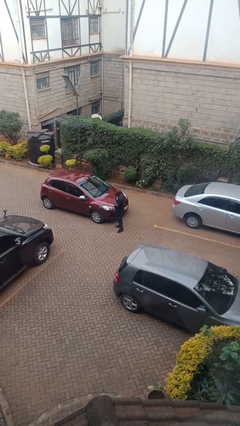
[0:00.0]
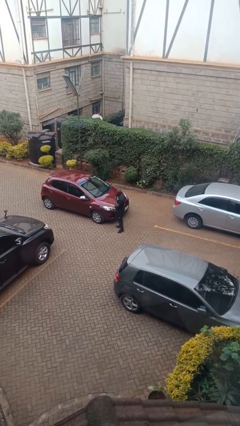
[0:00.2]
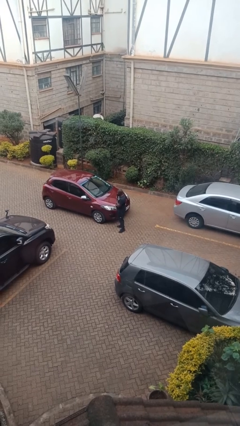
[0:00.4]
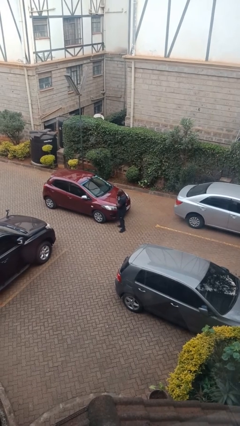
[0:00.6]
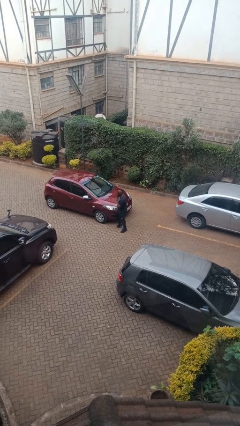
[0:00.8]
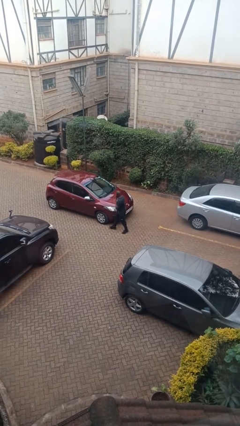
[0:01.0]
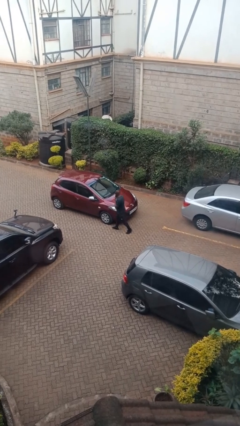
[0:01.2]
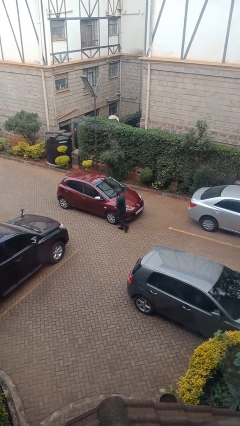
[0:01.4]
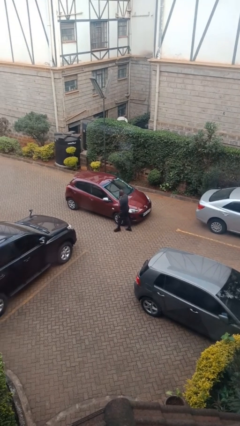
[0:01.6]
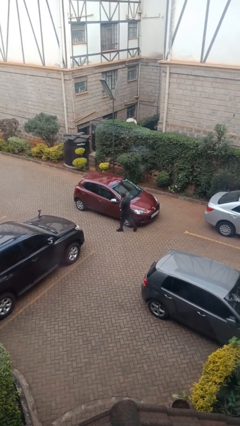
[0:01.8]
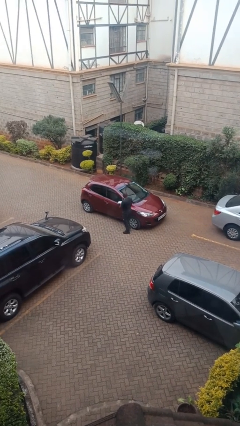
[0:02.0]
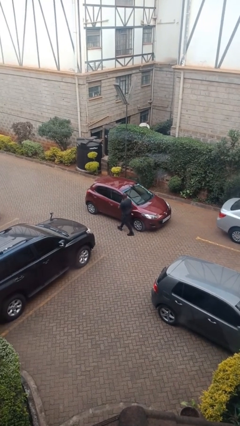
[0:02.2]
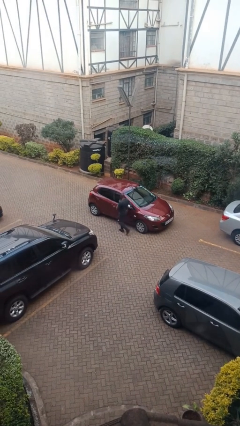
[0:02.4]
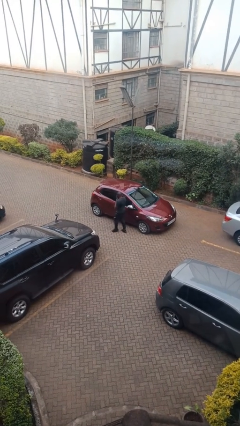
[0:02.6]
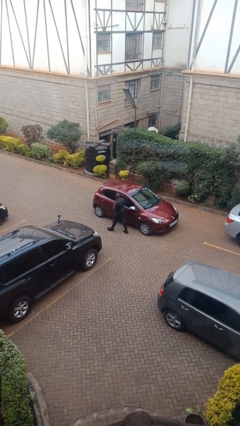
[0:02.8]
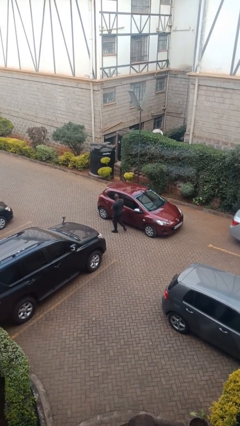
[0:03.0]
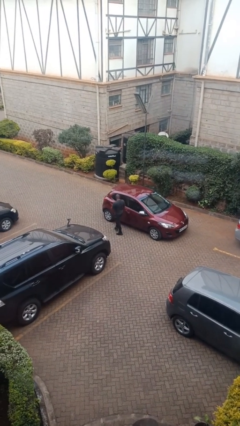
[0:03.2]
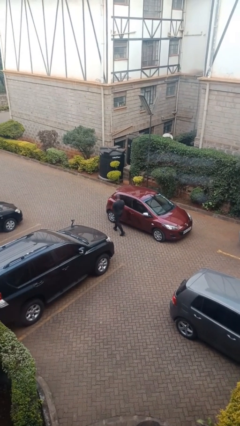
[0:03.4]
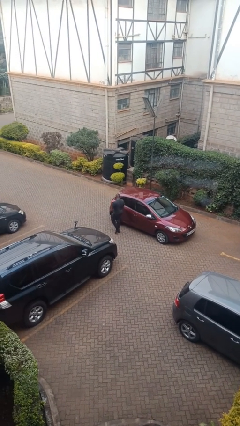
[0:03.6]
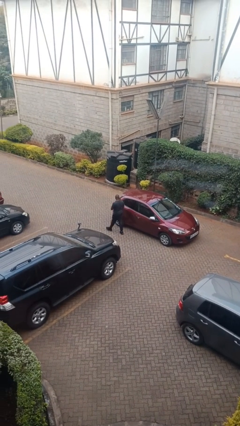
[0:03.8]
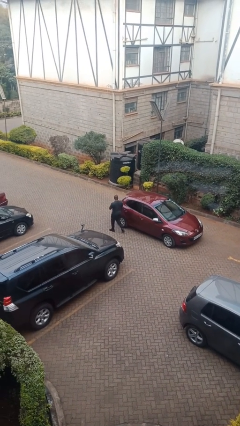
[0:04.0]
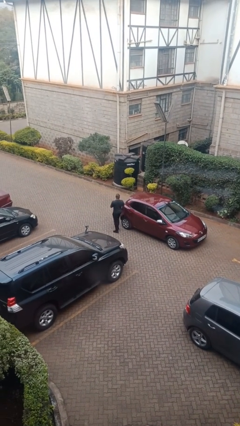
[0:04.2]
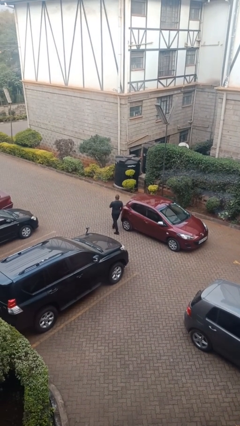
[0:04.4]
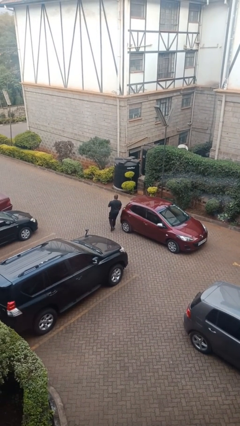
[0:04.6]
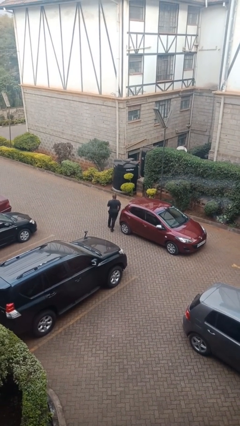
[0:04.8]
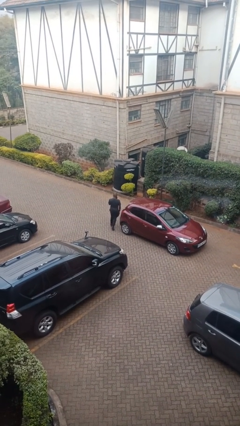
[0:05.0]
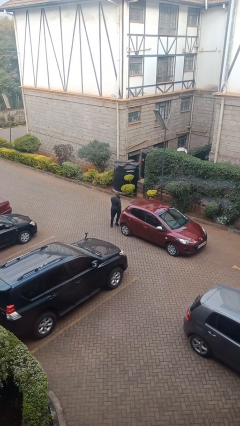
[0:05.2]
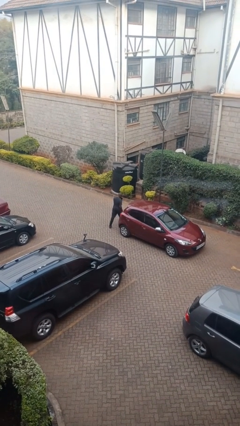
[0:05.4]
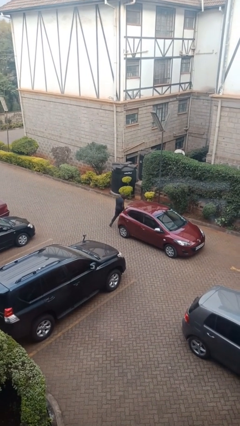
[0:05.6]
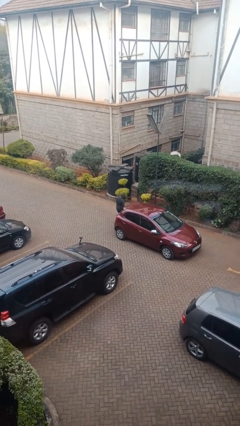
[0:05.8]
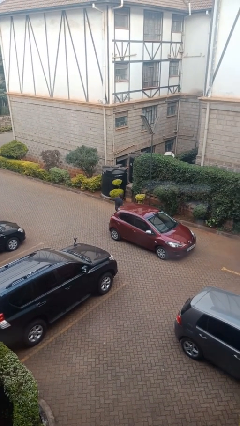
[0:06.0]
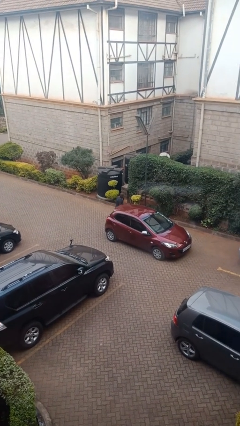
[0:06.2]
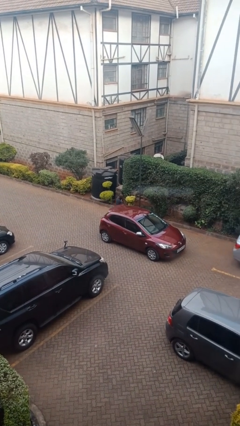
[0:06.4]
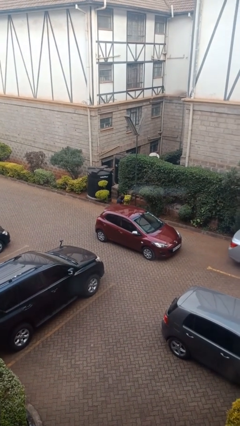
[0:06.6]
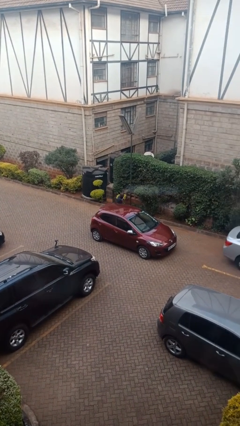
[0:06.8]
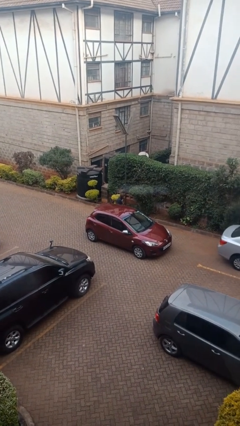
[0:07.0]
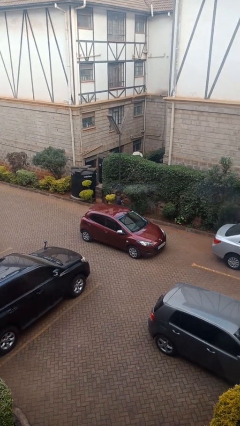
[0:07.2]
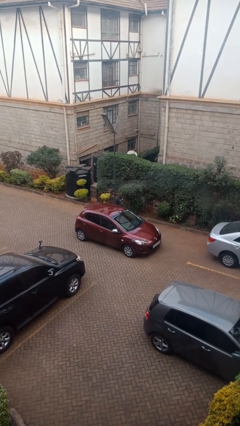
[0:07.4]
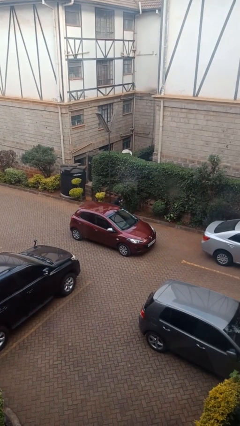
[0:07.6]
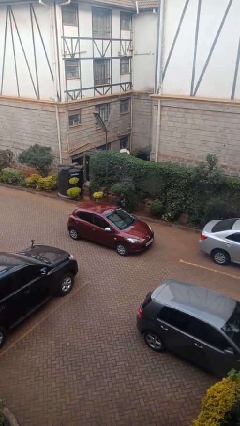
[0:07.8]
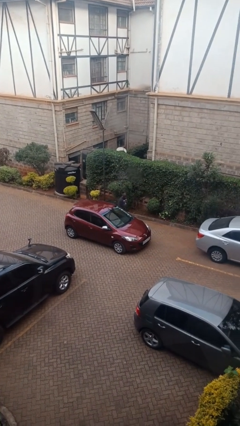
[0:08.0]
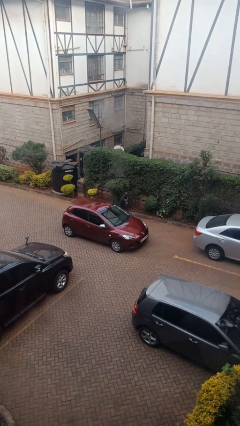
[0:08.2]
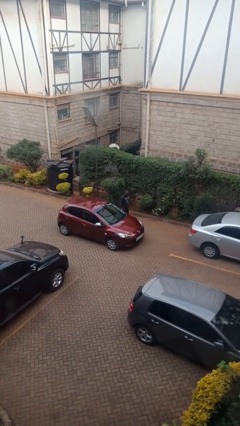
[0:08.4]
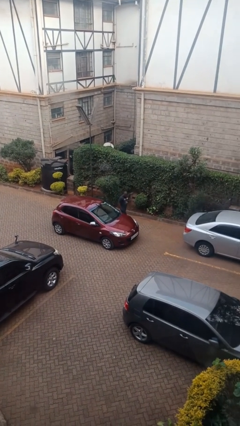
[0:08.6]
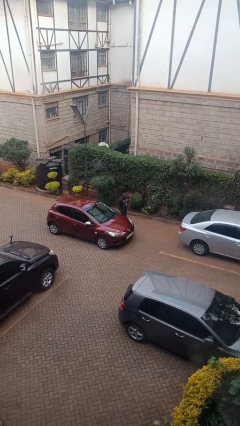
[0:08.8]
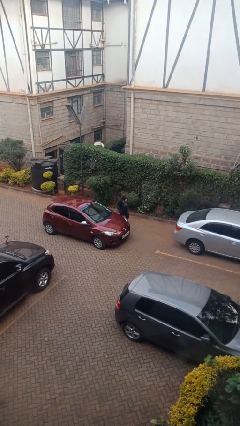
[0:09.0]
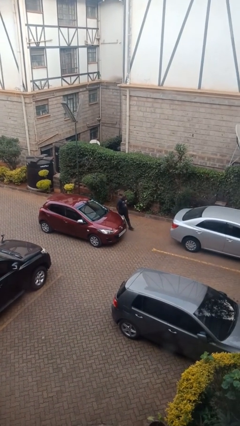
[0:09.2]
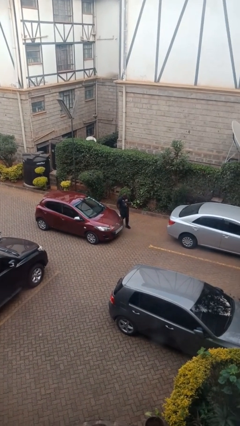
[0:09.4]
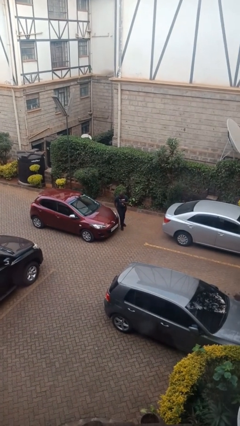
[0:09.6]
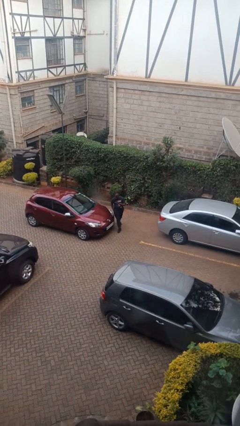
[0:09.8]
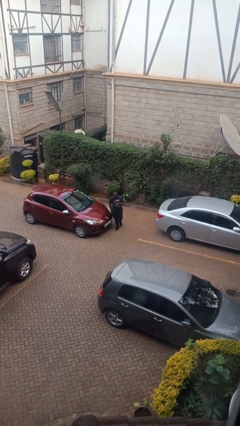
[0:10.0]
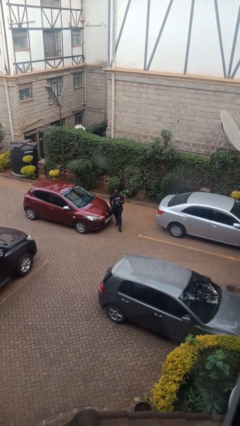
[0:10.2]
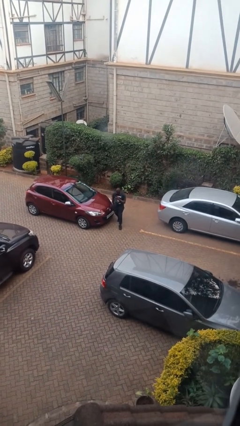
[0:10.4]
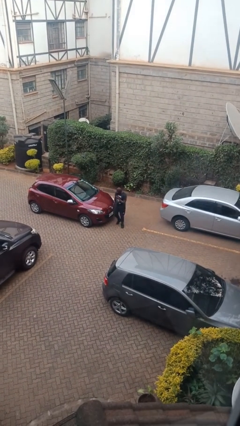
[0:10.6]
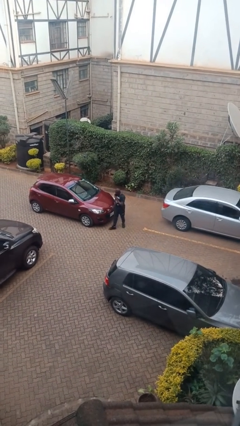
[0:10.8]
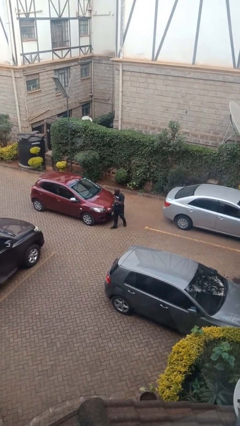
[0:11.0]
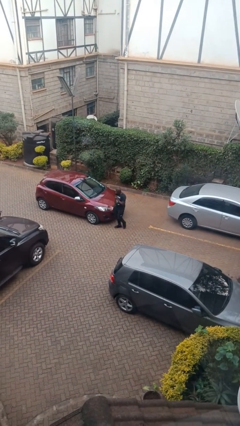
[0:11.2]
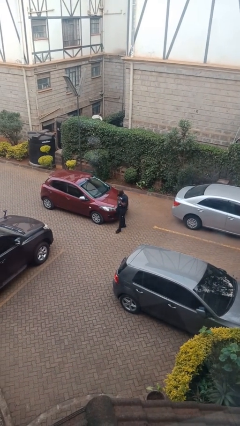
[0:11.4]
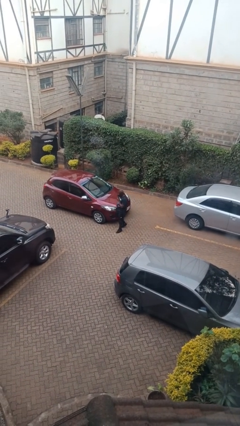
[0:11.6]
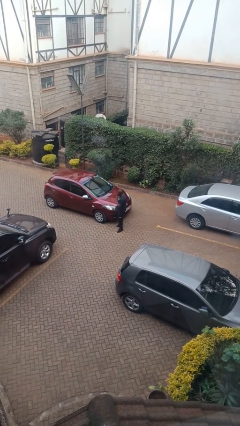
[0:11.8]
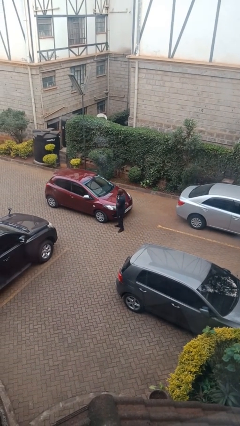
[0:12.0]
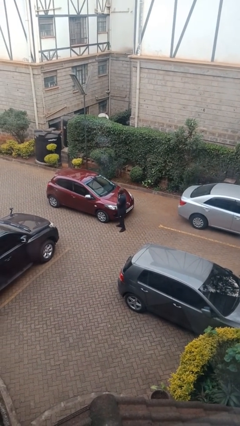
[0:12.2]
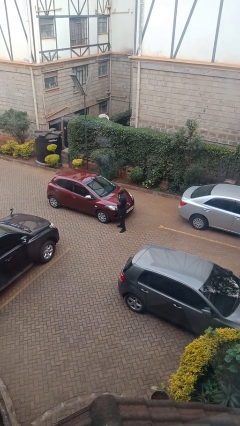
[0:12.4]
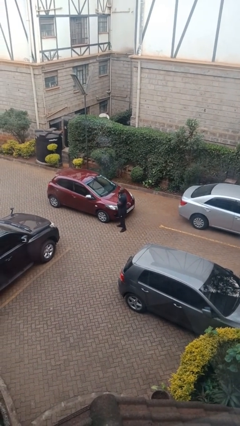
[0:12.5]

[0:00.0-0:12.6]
person walks around car

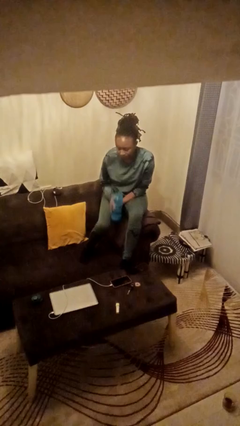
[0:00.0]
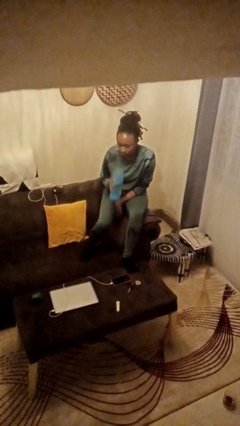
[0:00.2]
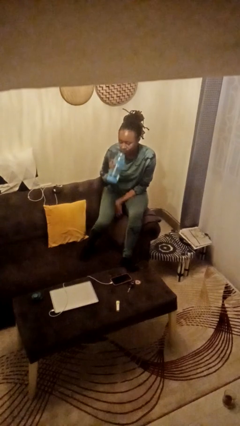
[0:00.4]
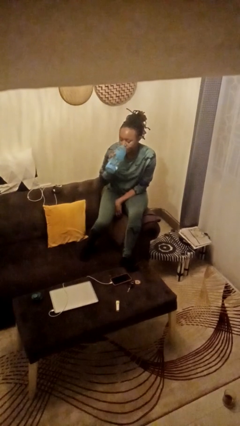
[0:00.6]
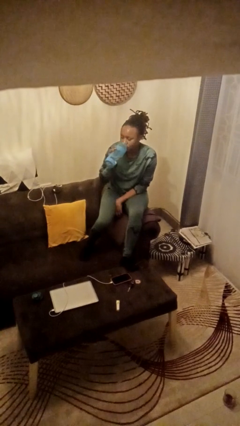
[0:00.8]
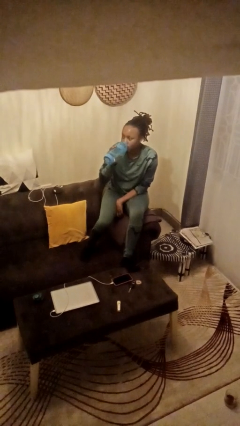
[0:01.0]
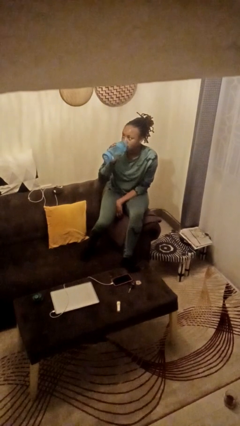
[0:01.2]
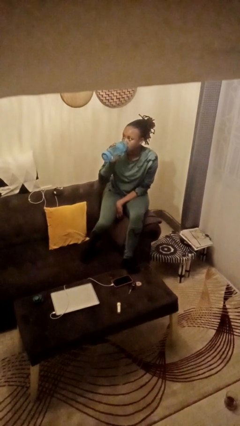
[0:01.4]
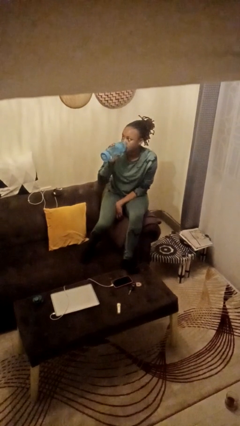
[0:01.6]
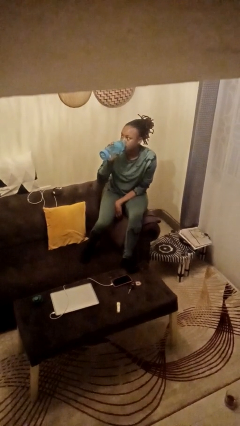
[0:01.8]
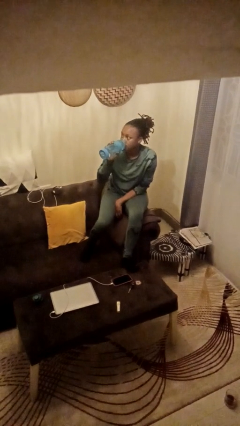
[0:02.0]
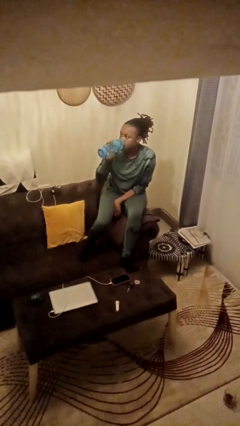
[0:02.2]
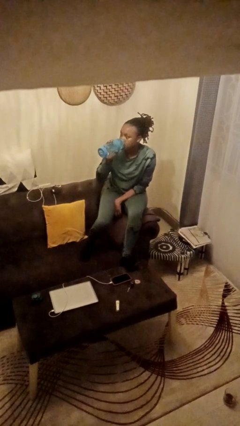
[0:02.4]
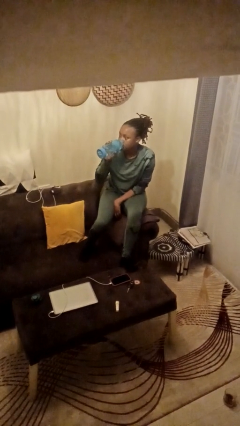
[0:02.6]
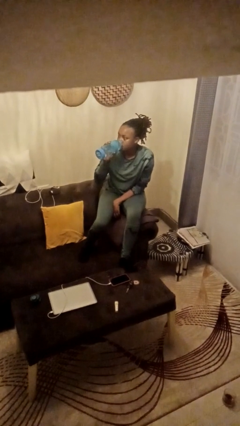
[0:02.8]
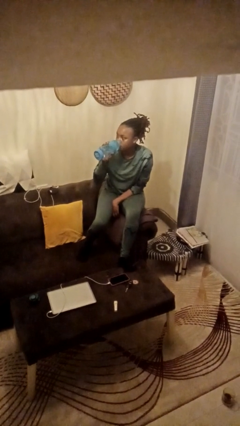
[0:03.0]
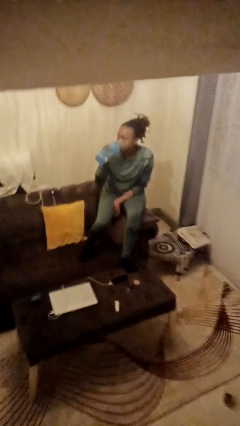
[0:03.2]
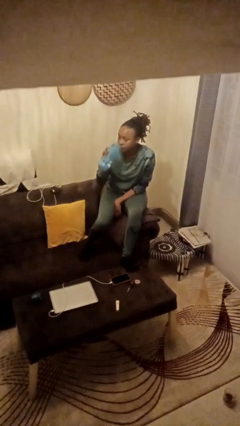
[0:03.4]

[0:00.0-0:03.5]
person drinks from bottle

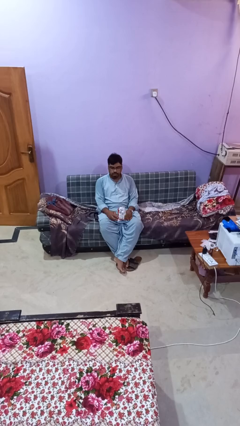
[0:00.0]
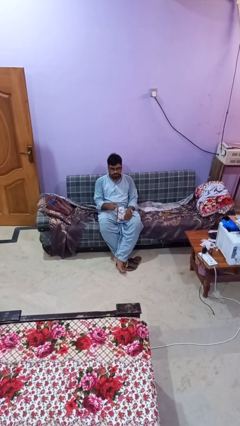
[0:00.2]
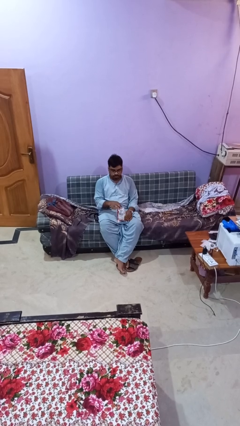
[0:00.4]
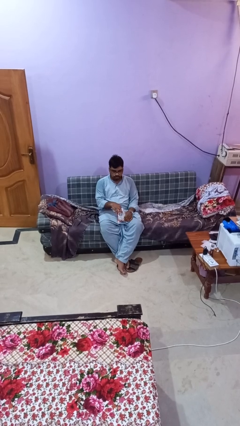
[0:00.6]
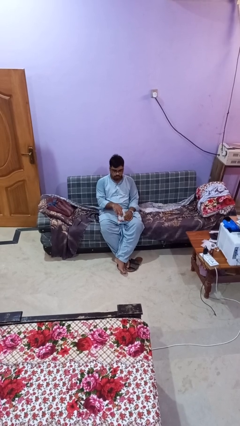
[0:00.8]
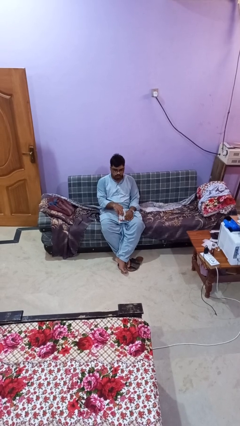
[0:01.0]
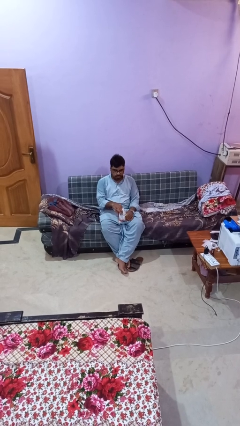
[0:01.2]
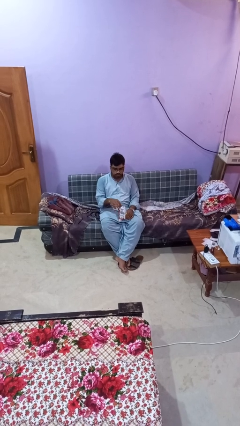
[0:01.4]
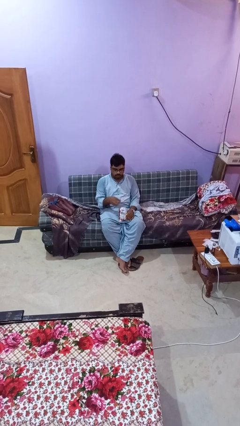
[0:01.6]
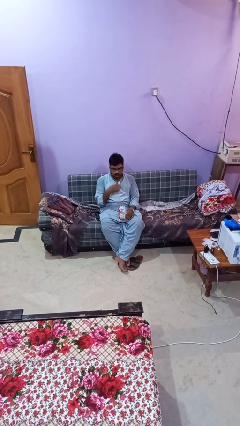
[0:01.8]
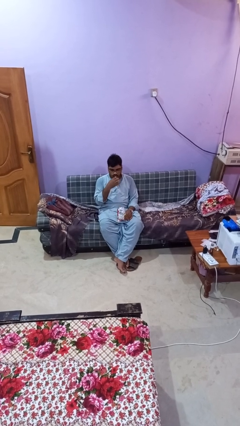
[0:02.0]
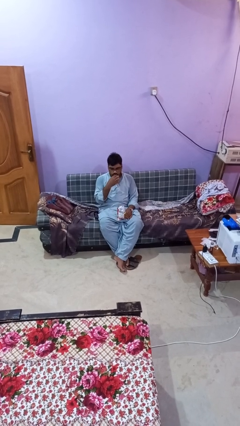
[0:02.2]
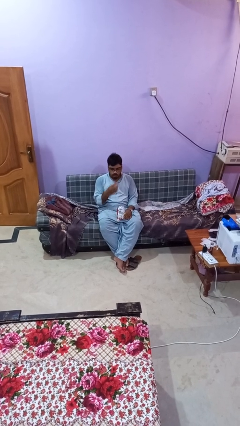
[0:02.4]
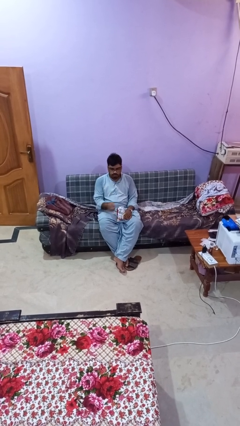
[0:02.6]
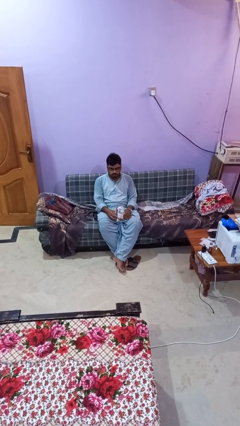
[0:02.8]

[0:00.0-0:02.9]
person eats snack from bag
